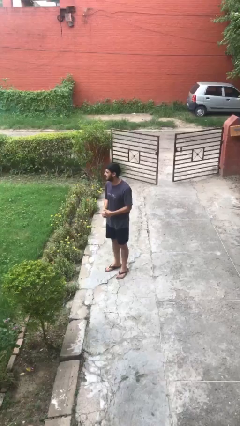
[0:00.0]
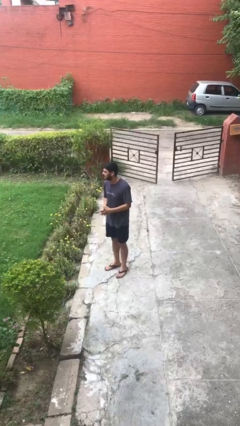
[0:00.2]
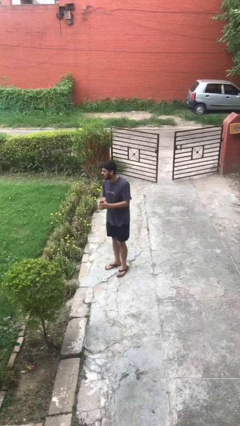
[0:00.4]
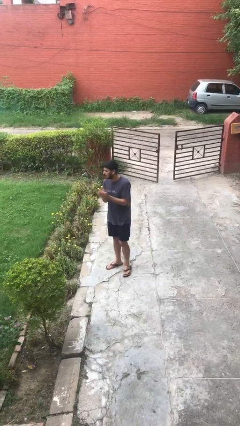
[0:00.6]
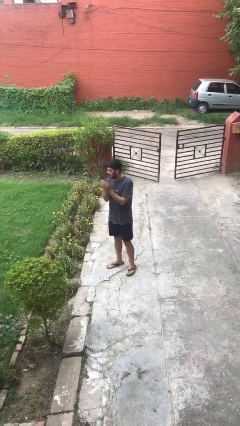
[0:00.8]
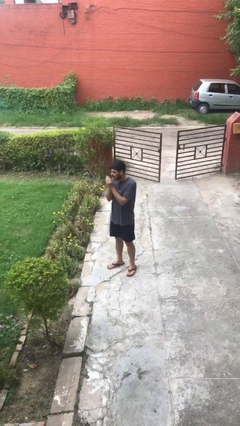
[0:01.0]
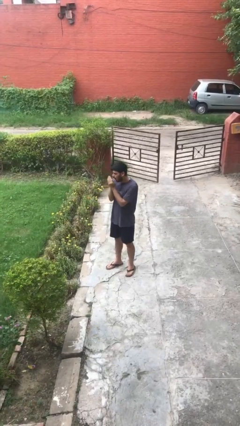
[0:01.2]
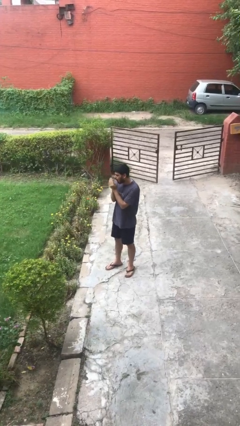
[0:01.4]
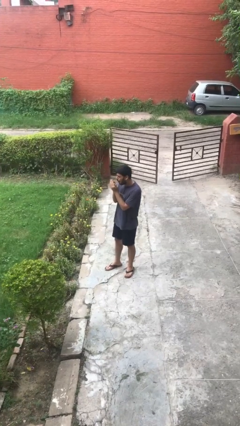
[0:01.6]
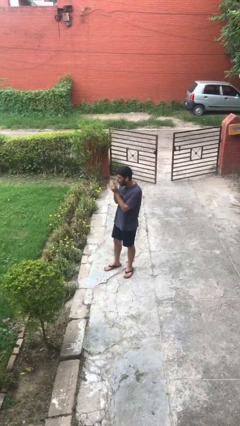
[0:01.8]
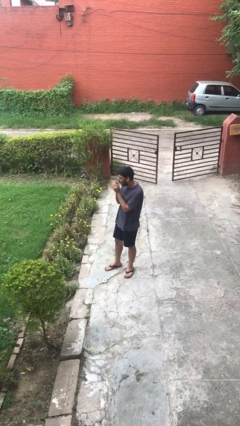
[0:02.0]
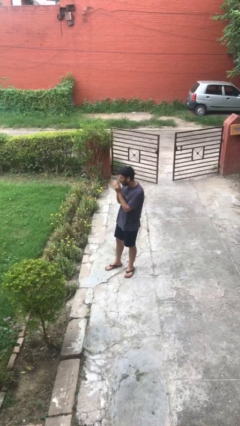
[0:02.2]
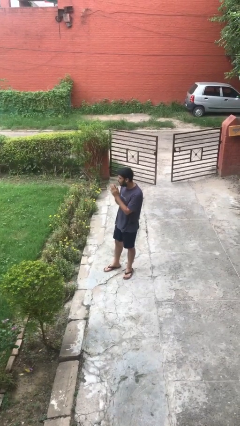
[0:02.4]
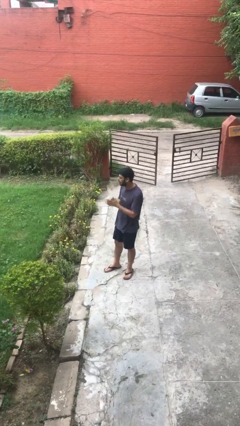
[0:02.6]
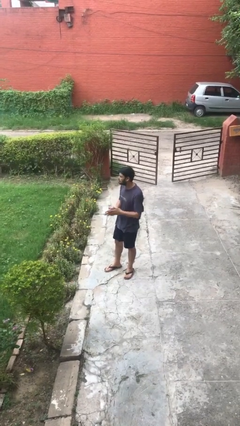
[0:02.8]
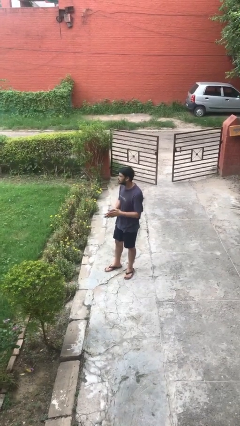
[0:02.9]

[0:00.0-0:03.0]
person blows into hands

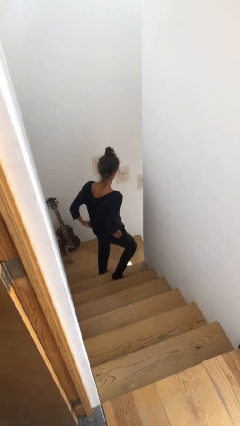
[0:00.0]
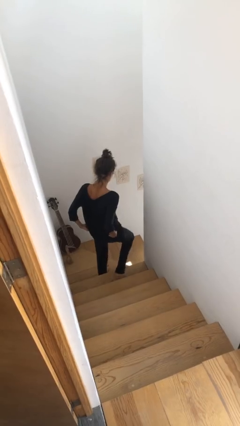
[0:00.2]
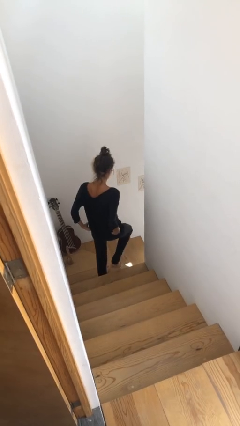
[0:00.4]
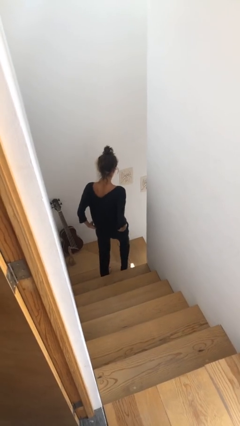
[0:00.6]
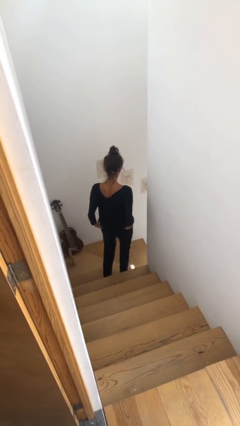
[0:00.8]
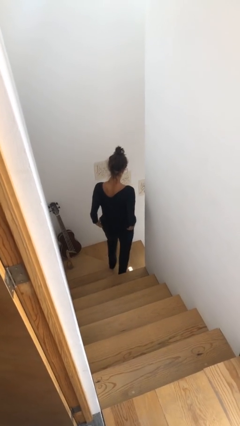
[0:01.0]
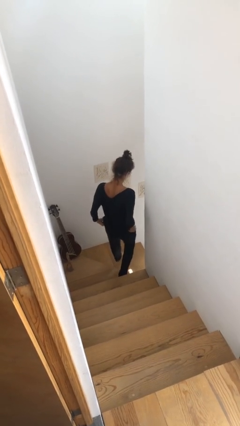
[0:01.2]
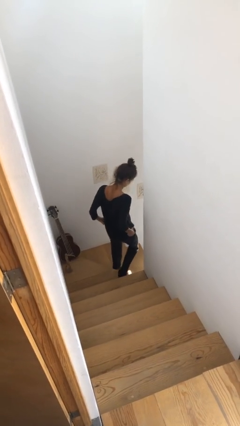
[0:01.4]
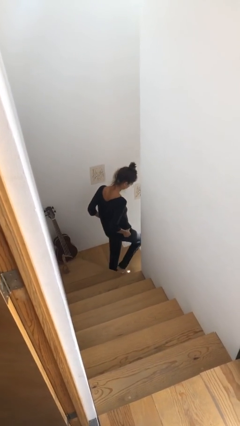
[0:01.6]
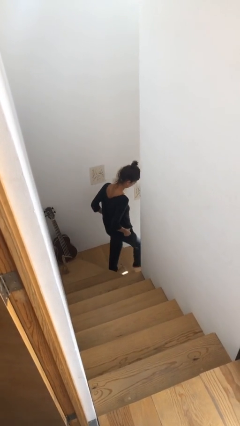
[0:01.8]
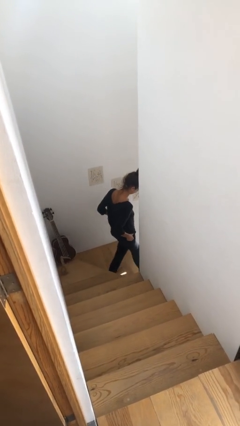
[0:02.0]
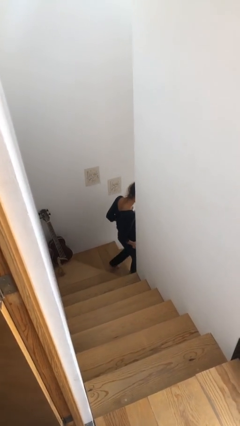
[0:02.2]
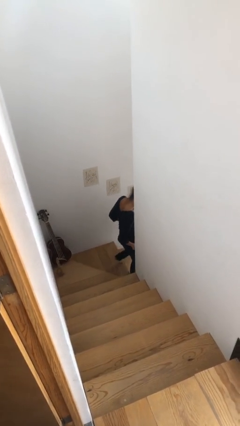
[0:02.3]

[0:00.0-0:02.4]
person climbs down stairs

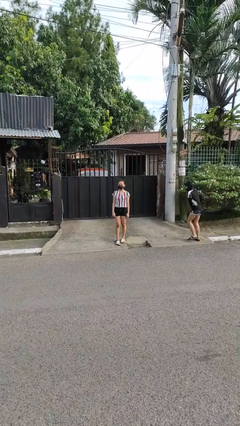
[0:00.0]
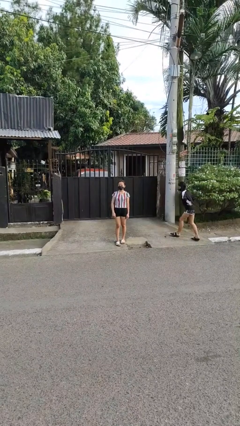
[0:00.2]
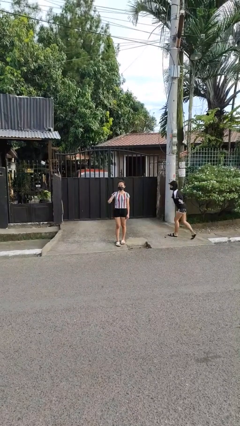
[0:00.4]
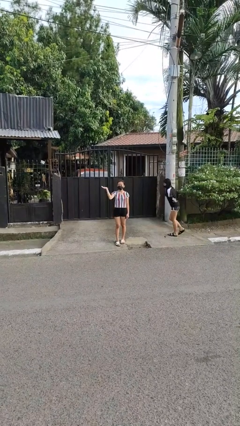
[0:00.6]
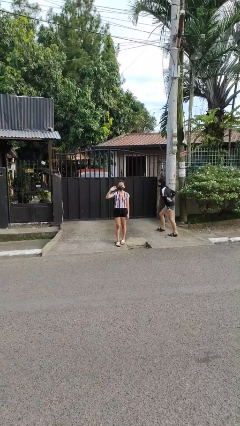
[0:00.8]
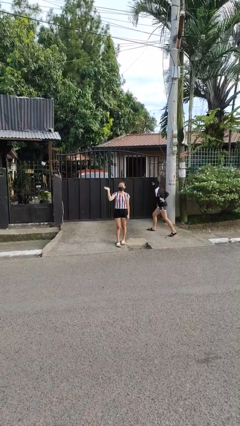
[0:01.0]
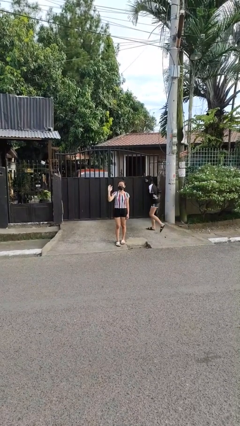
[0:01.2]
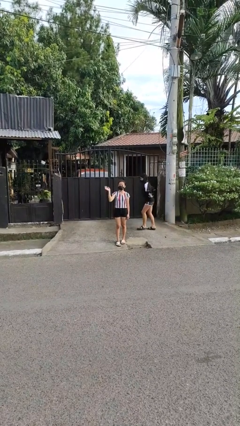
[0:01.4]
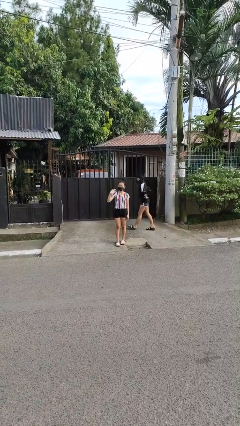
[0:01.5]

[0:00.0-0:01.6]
person waves at person

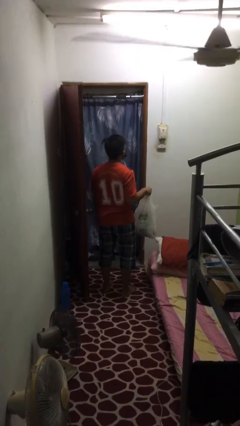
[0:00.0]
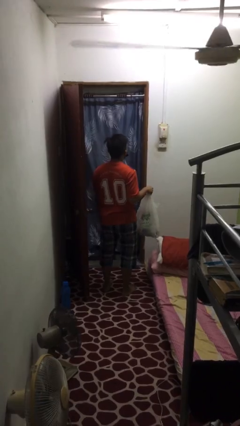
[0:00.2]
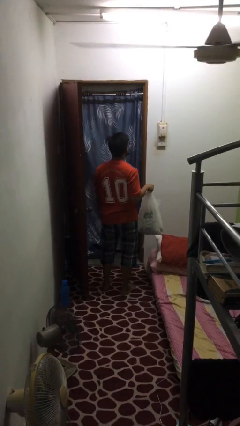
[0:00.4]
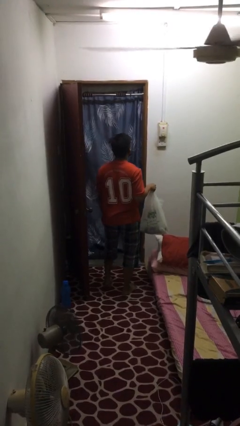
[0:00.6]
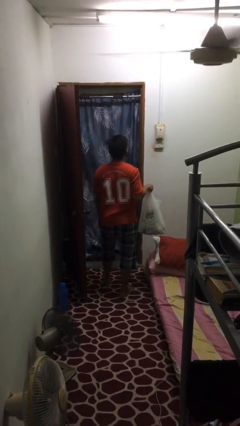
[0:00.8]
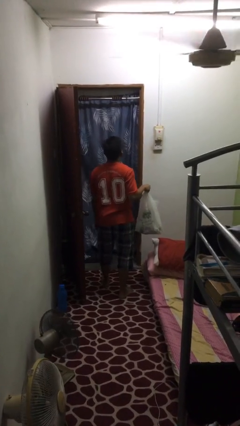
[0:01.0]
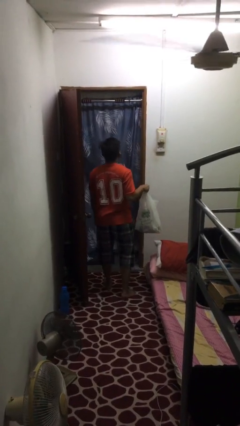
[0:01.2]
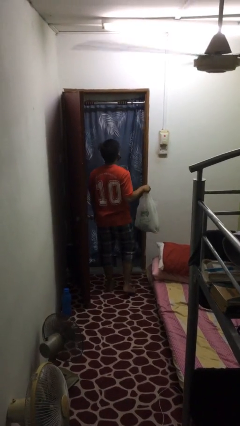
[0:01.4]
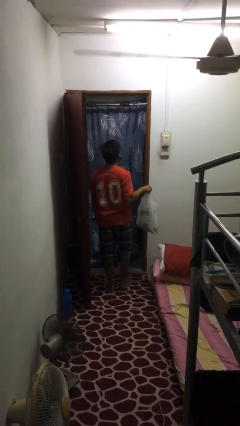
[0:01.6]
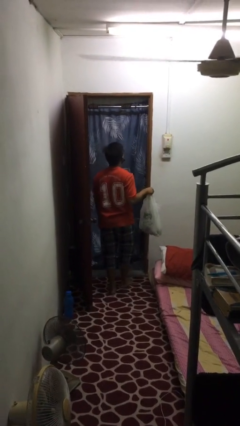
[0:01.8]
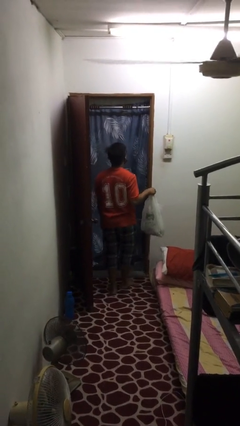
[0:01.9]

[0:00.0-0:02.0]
person carries groceries

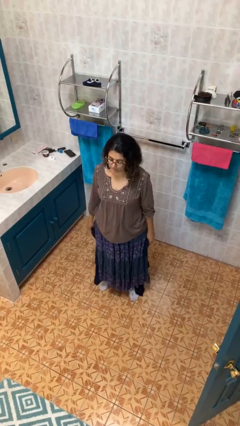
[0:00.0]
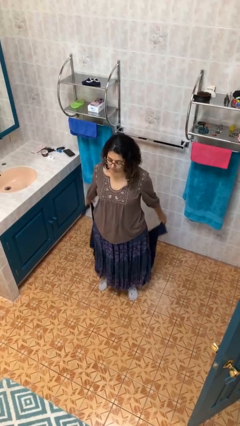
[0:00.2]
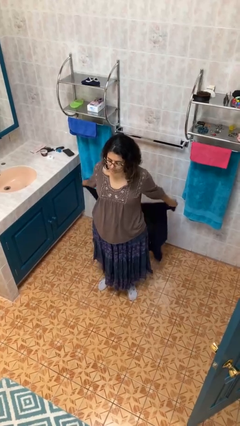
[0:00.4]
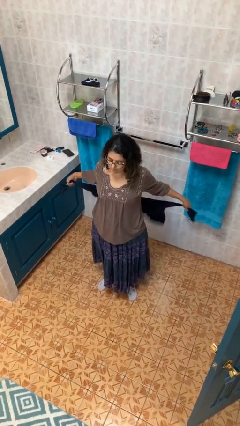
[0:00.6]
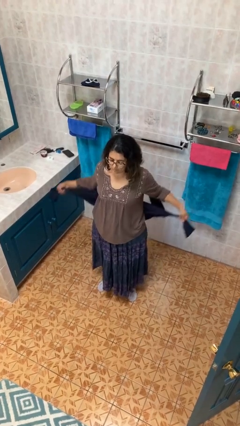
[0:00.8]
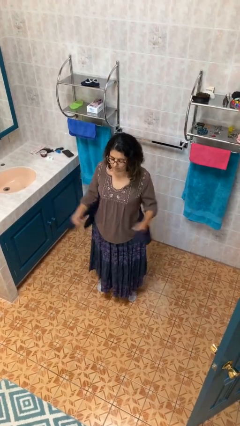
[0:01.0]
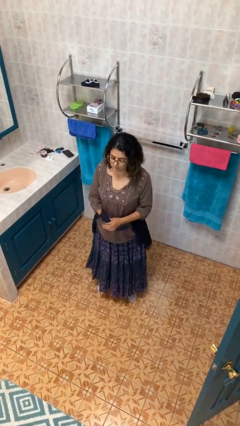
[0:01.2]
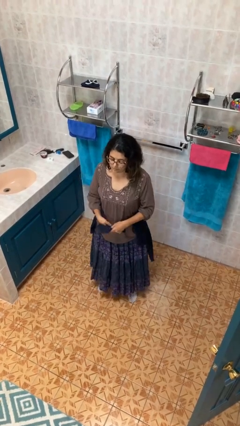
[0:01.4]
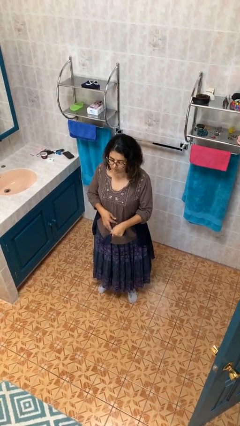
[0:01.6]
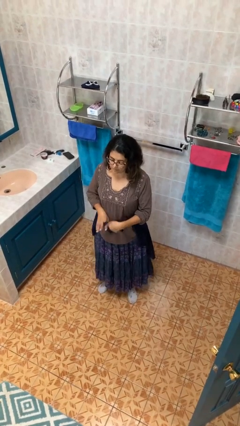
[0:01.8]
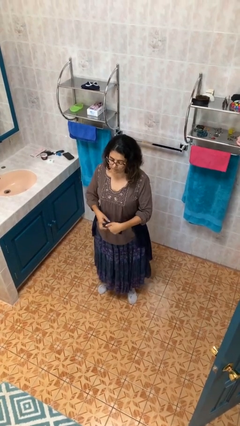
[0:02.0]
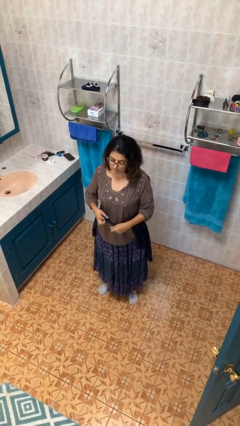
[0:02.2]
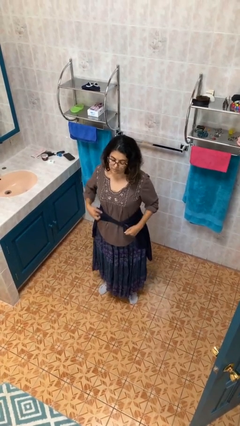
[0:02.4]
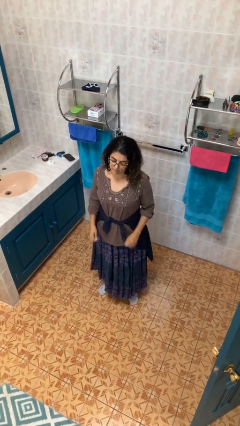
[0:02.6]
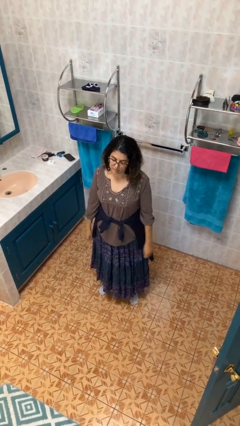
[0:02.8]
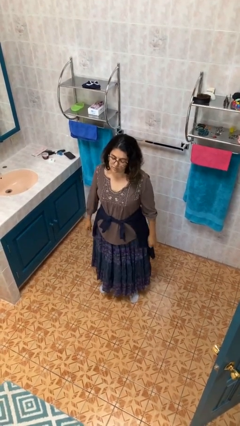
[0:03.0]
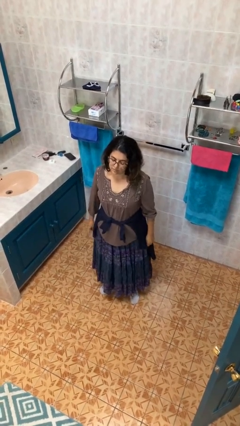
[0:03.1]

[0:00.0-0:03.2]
person ties jacket around waist

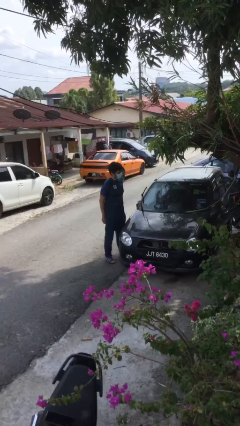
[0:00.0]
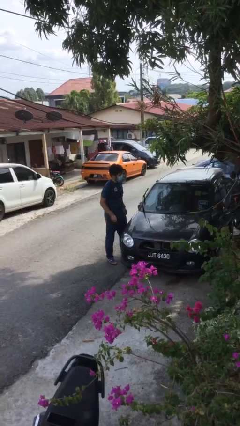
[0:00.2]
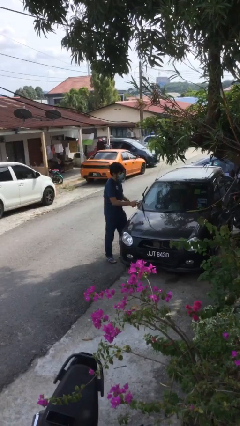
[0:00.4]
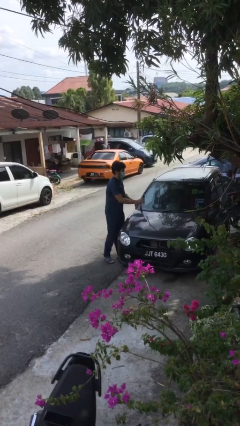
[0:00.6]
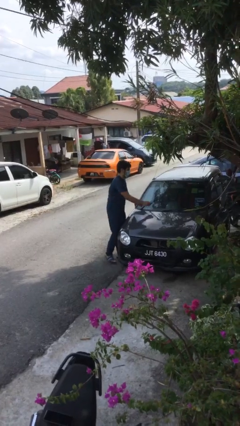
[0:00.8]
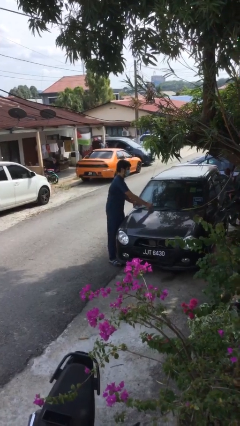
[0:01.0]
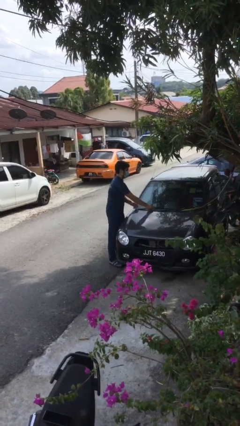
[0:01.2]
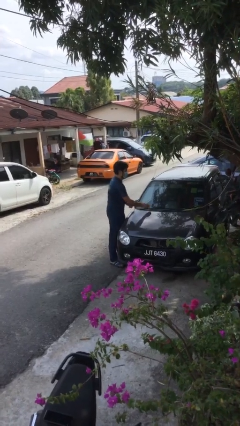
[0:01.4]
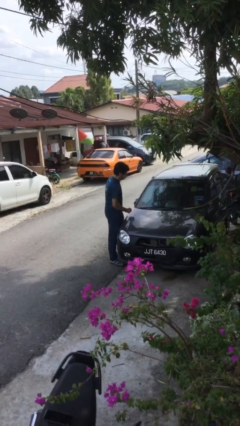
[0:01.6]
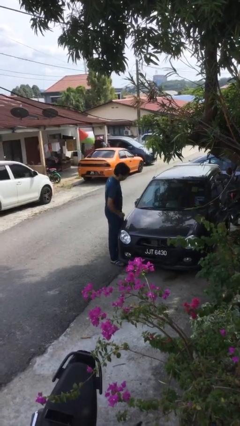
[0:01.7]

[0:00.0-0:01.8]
person flips down car wipers

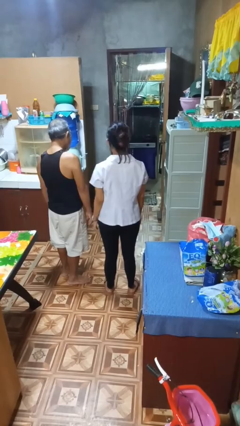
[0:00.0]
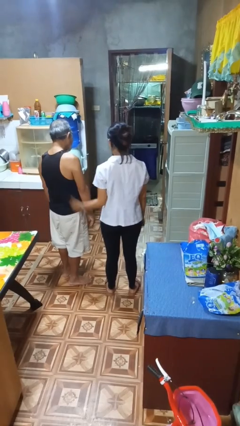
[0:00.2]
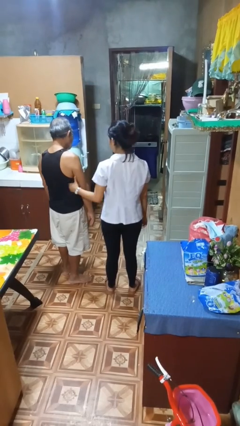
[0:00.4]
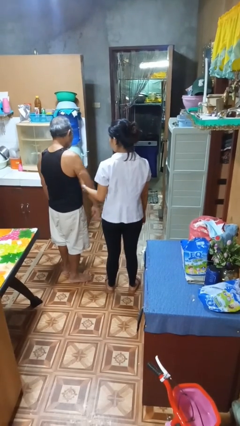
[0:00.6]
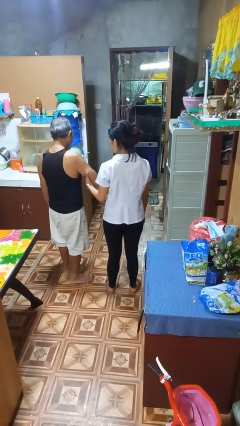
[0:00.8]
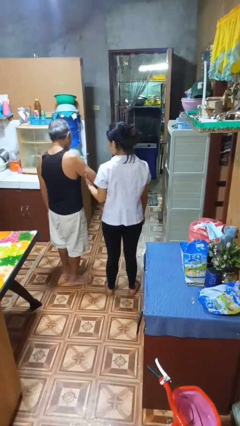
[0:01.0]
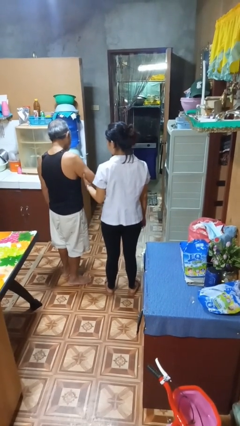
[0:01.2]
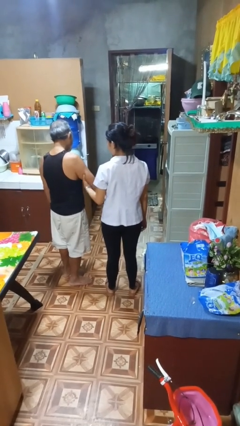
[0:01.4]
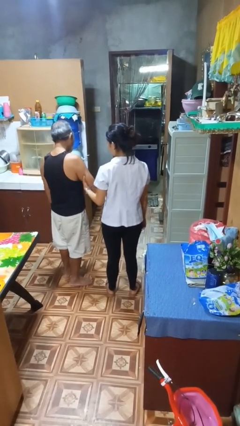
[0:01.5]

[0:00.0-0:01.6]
person grabs person by bicep

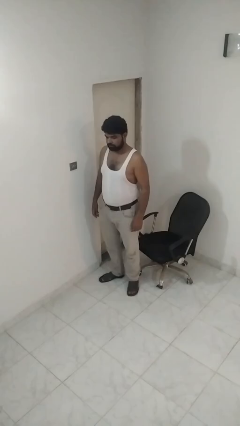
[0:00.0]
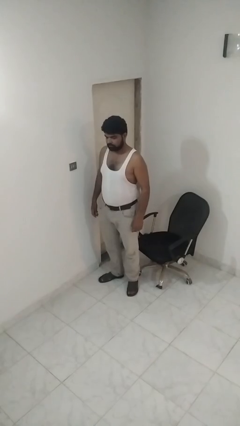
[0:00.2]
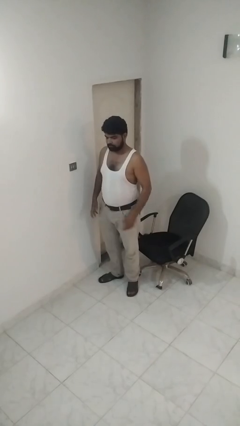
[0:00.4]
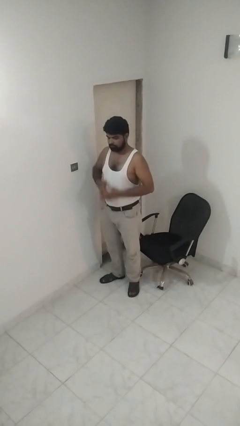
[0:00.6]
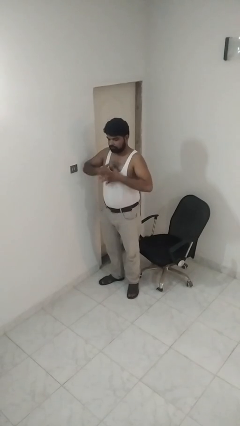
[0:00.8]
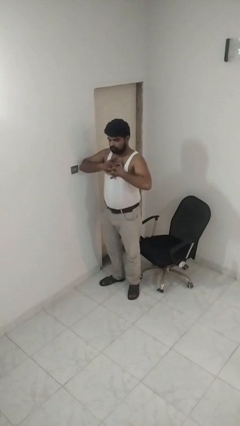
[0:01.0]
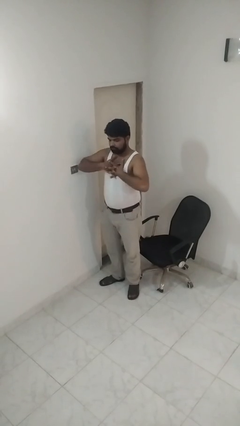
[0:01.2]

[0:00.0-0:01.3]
person cracks knuckles
